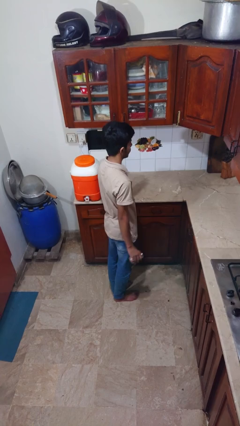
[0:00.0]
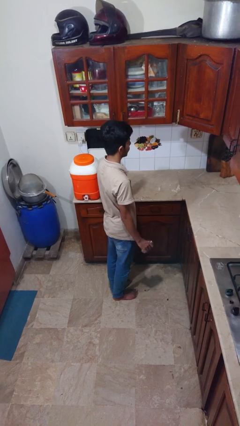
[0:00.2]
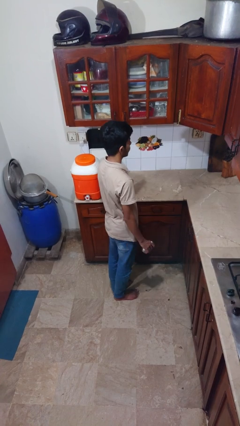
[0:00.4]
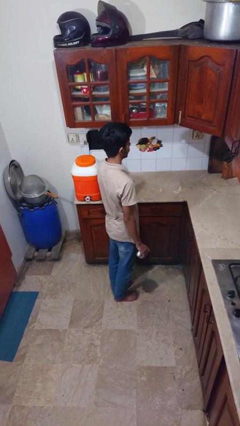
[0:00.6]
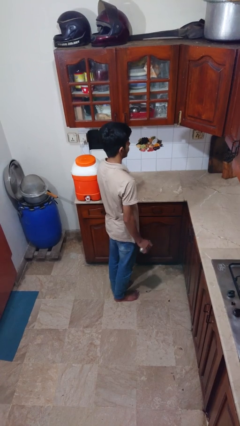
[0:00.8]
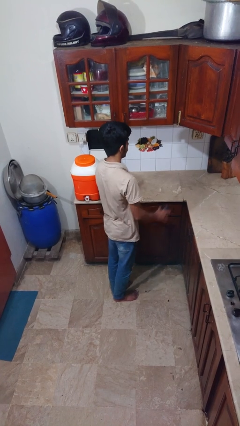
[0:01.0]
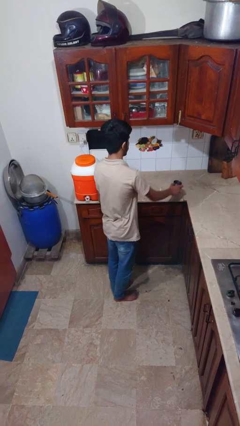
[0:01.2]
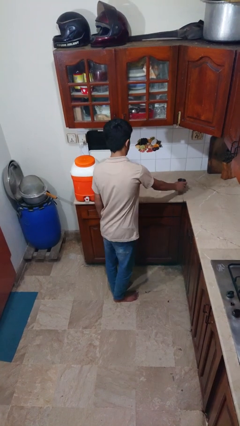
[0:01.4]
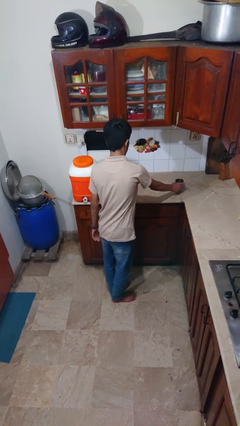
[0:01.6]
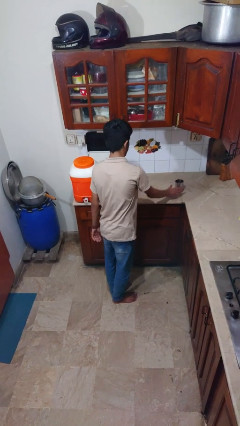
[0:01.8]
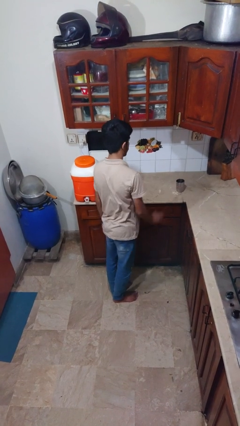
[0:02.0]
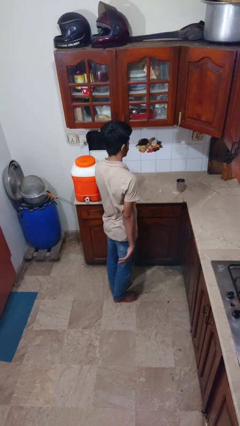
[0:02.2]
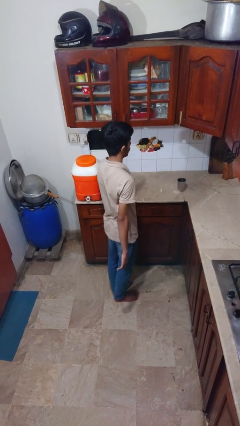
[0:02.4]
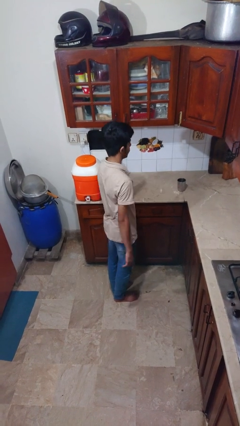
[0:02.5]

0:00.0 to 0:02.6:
person puts down object on countertop

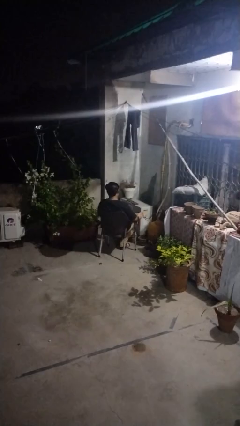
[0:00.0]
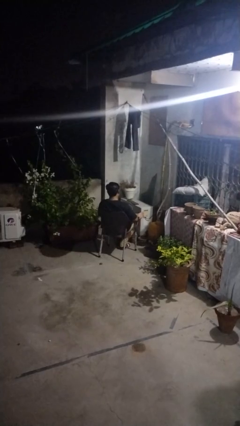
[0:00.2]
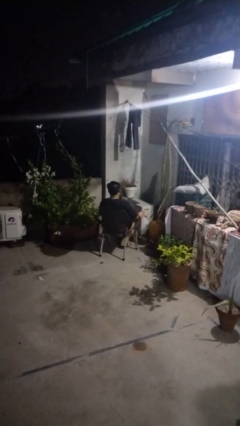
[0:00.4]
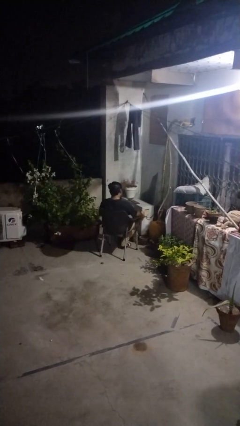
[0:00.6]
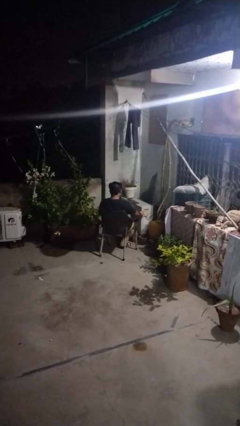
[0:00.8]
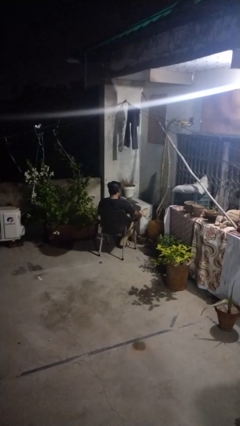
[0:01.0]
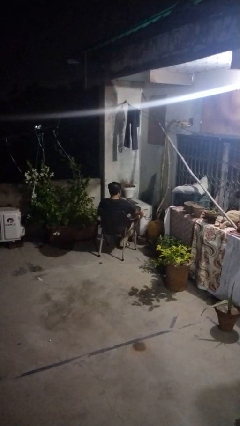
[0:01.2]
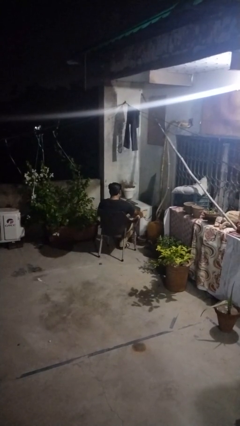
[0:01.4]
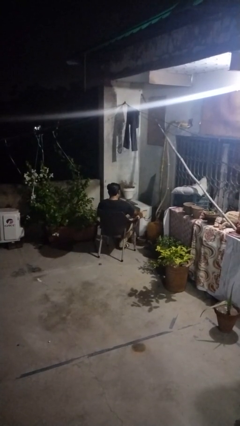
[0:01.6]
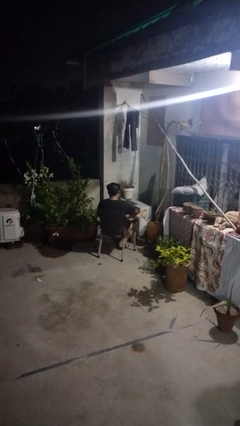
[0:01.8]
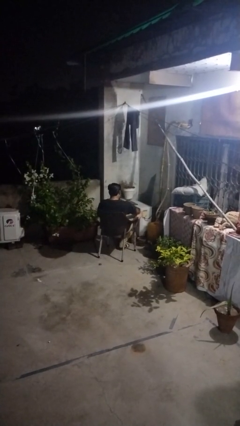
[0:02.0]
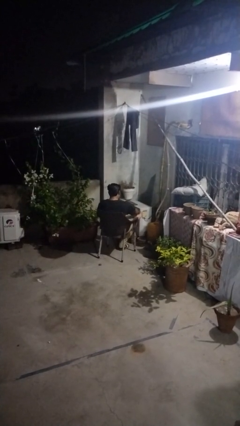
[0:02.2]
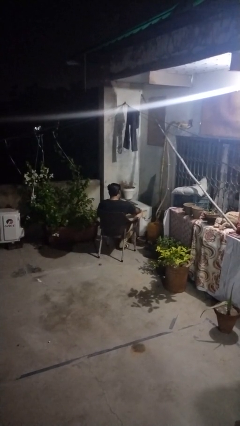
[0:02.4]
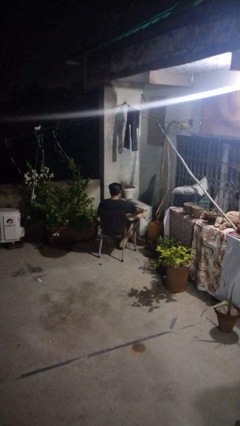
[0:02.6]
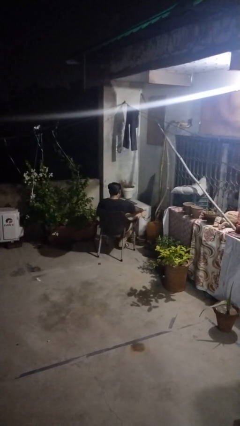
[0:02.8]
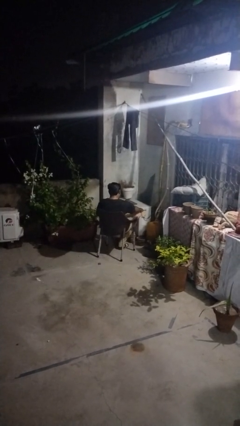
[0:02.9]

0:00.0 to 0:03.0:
person rubs foot

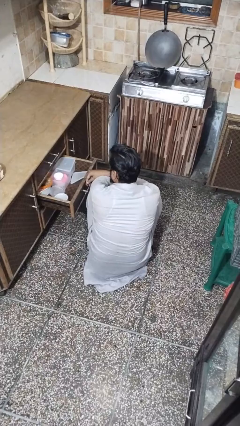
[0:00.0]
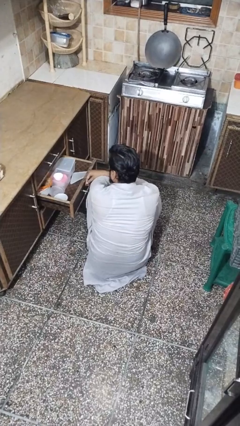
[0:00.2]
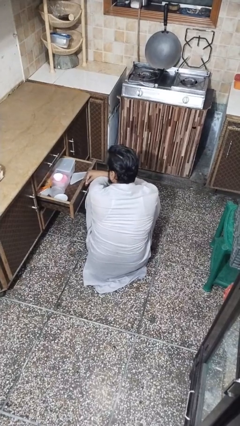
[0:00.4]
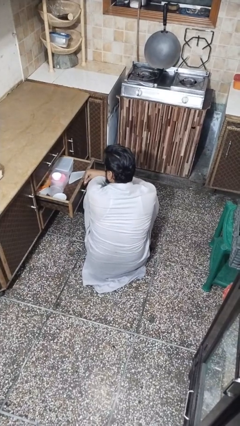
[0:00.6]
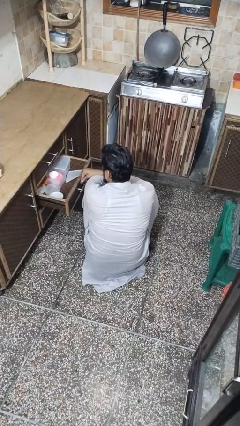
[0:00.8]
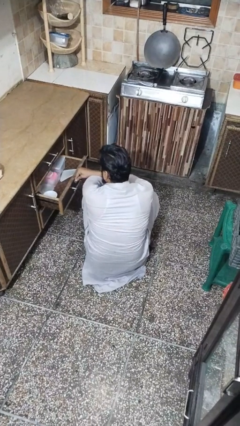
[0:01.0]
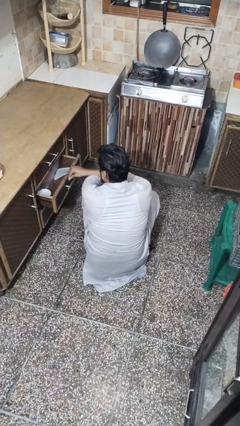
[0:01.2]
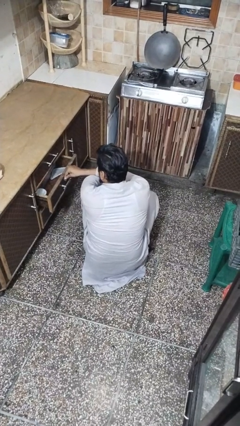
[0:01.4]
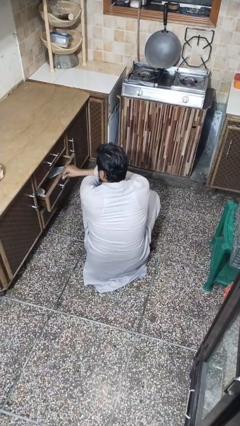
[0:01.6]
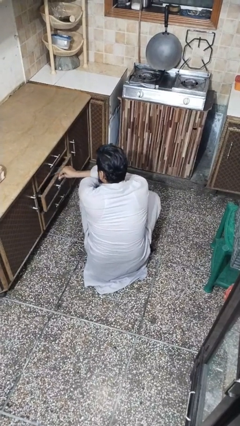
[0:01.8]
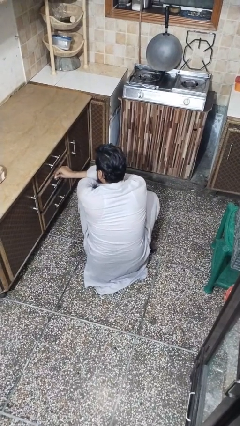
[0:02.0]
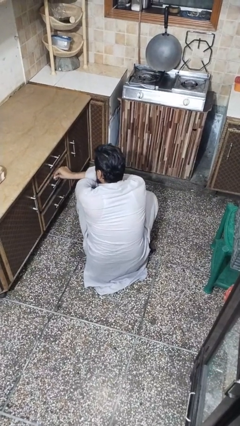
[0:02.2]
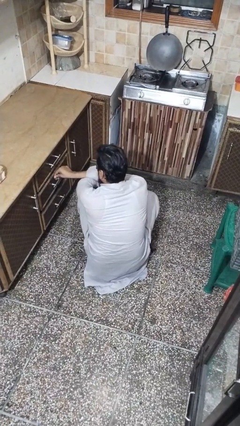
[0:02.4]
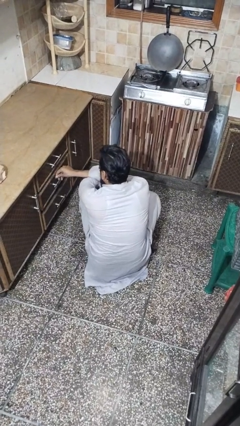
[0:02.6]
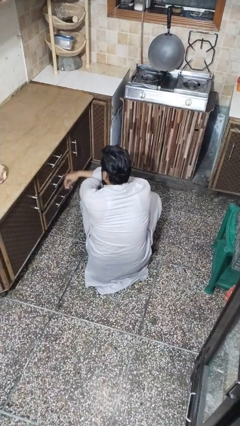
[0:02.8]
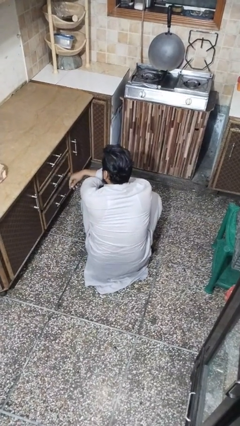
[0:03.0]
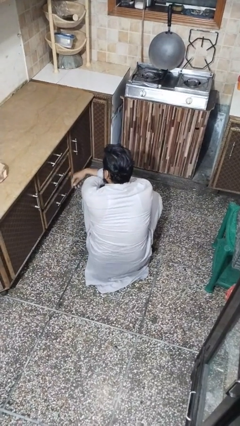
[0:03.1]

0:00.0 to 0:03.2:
person closes kitchen drawer

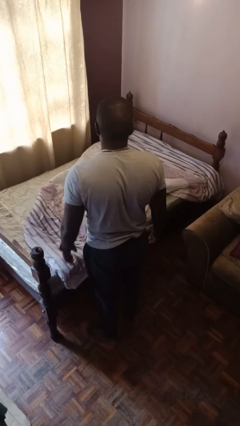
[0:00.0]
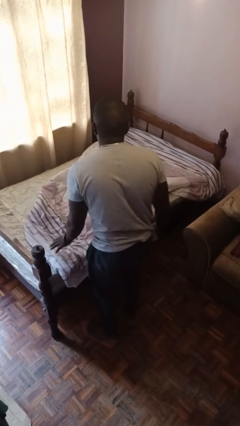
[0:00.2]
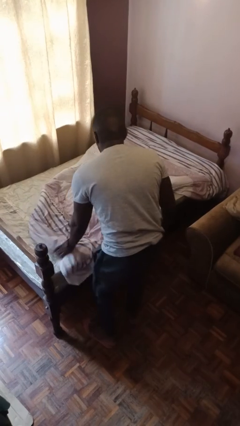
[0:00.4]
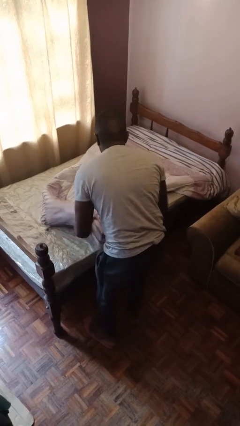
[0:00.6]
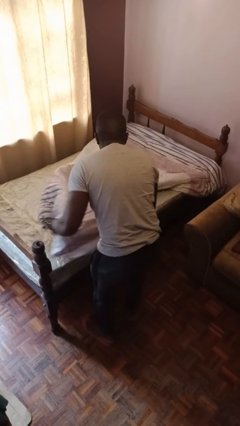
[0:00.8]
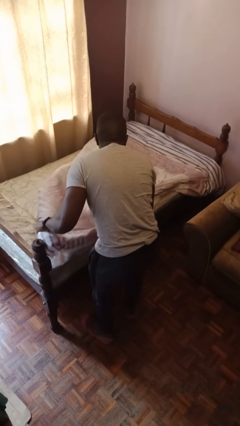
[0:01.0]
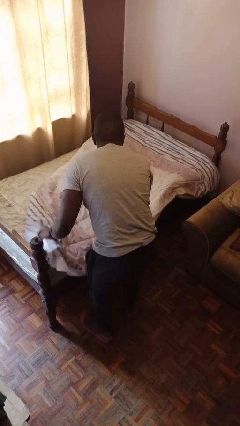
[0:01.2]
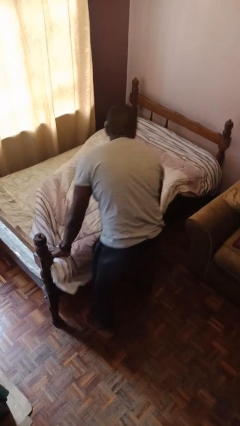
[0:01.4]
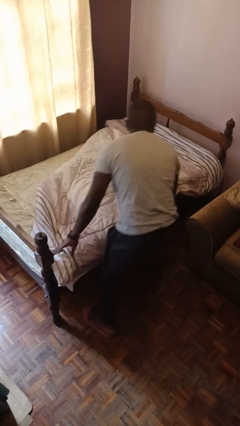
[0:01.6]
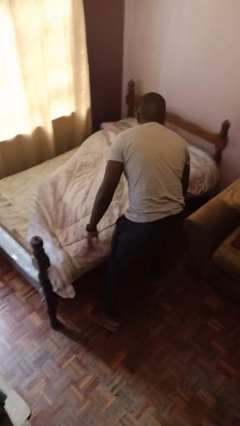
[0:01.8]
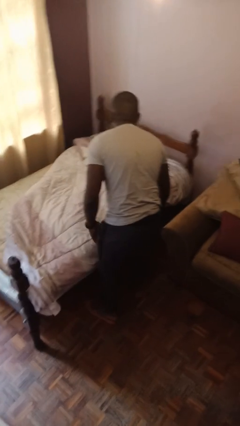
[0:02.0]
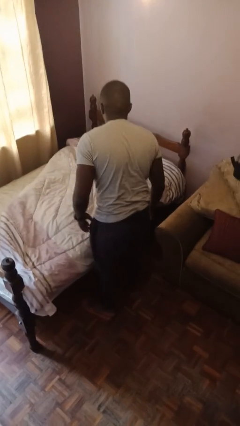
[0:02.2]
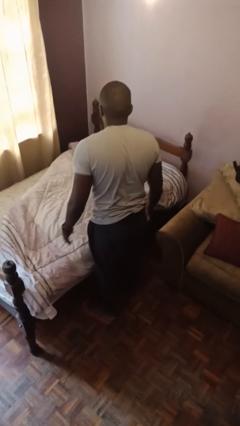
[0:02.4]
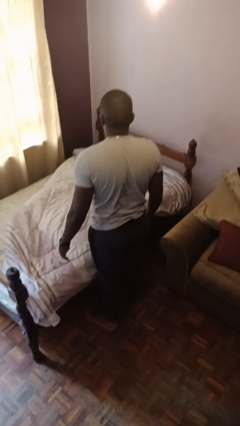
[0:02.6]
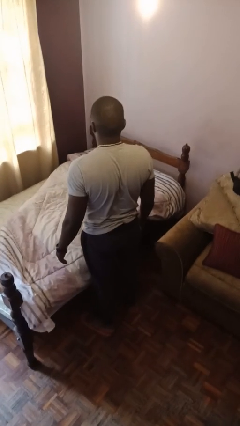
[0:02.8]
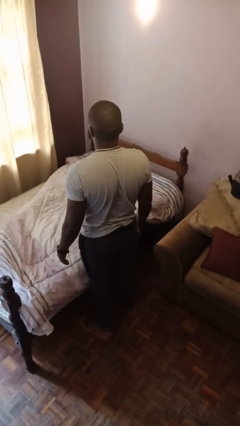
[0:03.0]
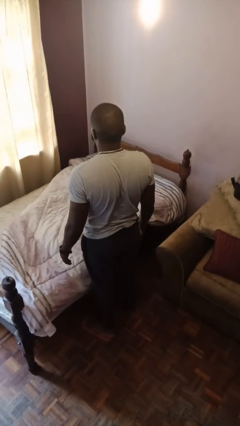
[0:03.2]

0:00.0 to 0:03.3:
person makes bed

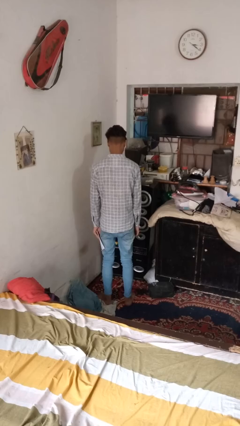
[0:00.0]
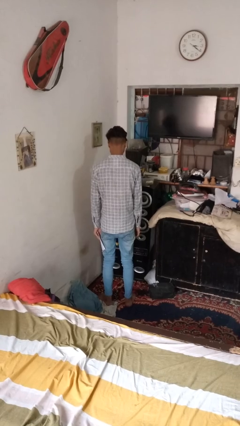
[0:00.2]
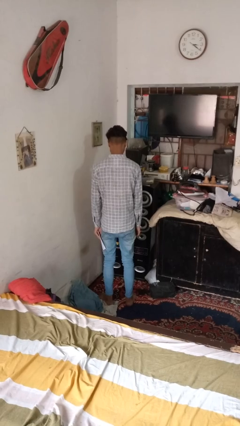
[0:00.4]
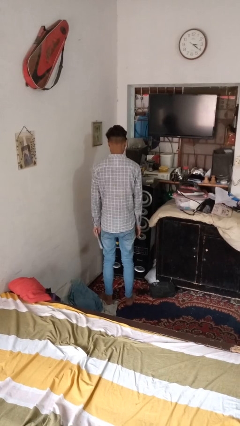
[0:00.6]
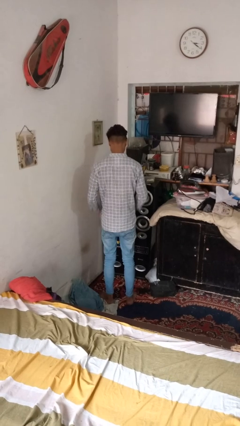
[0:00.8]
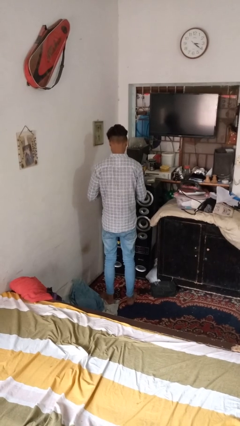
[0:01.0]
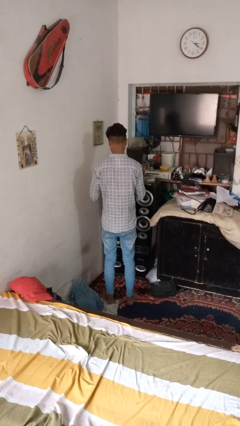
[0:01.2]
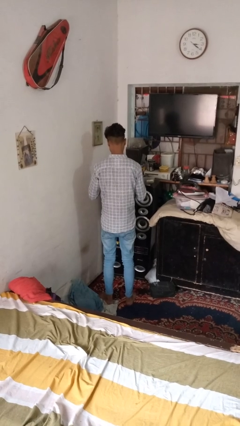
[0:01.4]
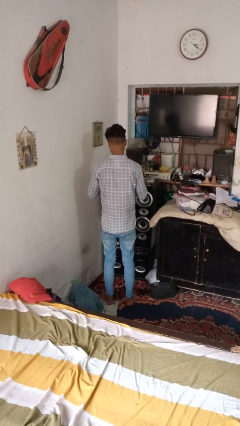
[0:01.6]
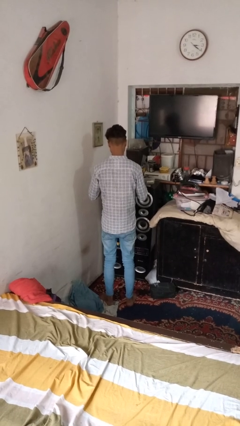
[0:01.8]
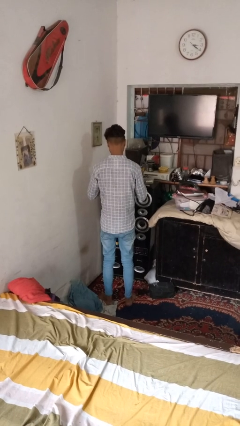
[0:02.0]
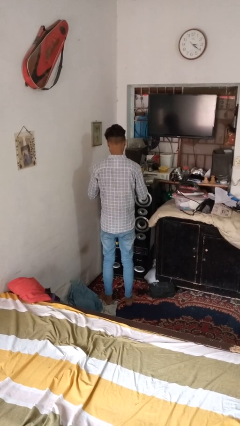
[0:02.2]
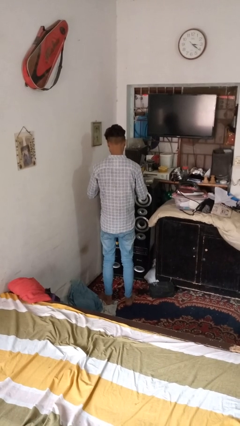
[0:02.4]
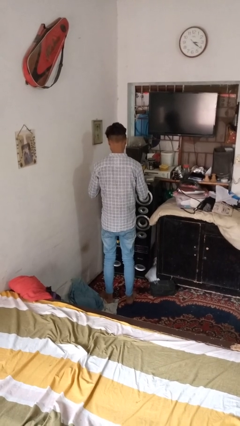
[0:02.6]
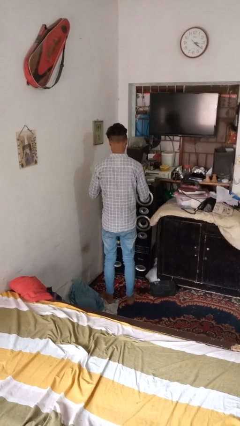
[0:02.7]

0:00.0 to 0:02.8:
person tears paper

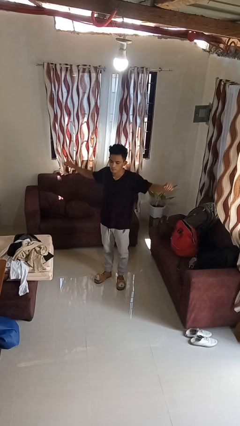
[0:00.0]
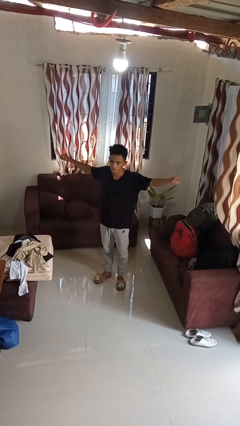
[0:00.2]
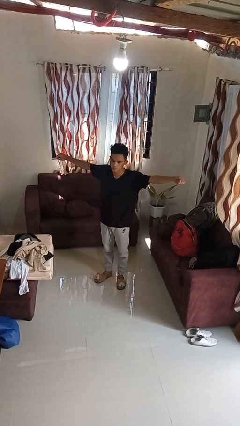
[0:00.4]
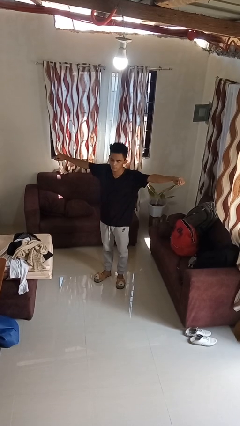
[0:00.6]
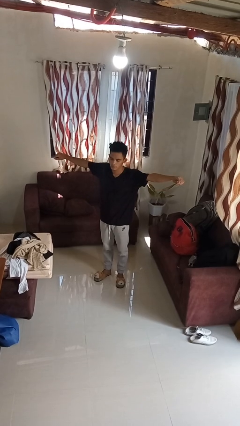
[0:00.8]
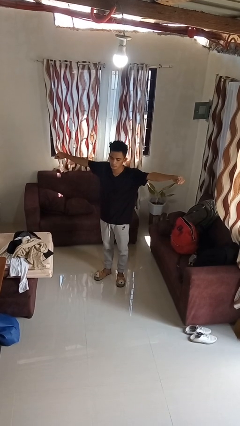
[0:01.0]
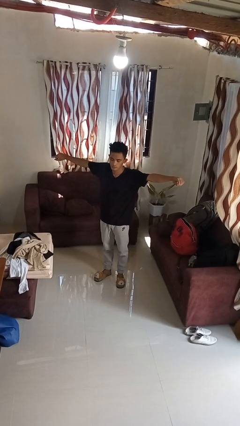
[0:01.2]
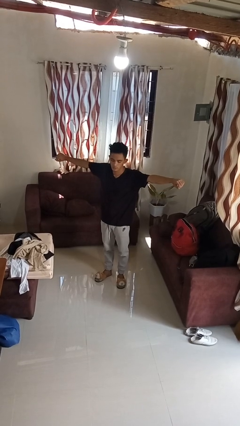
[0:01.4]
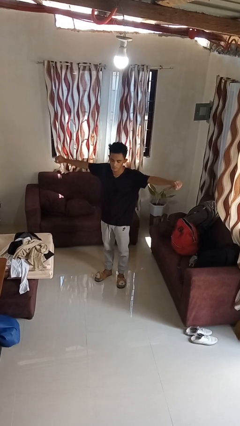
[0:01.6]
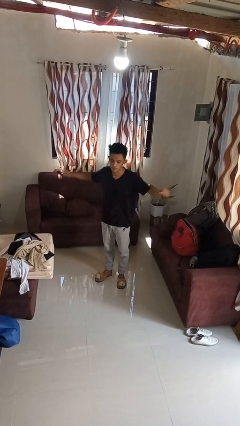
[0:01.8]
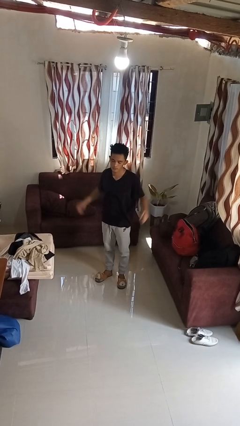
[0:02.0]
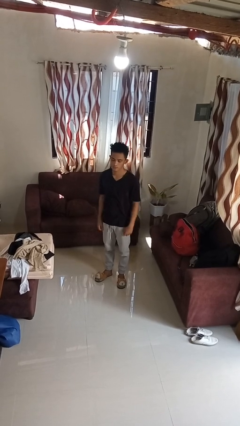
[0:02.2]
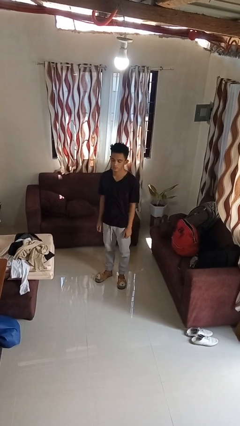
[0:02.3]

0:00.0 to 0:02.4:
person stretches arms to side
